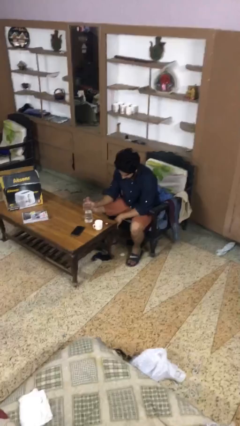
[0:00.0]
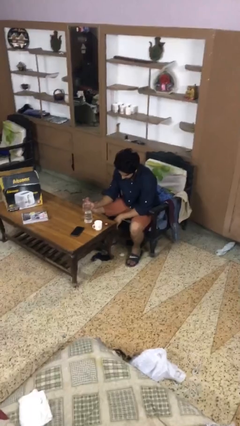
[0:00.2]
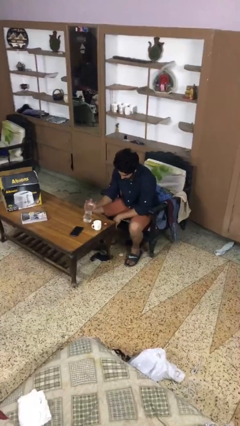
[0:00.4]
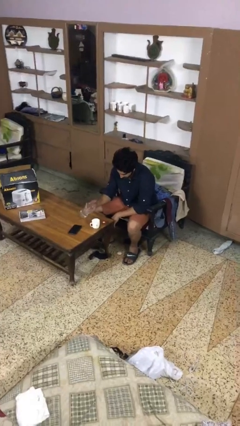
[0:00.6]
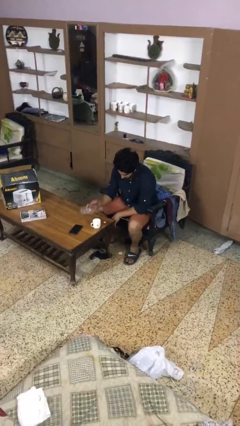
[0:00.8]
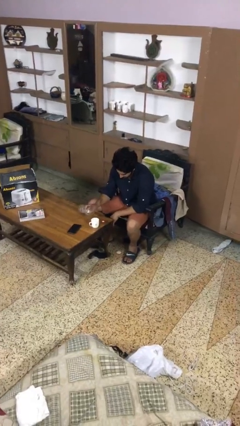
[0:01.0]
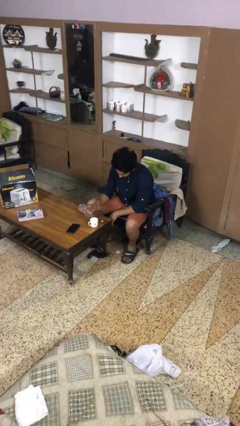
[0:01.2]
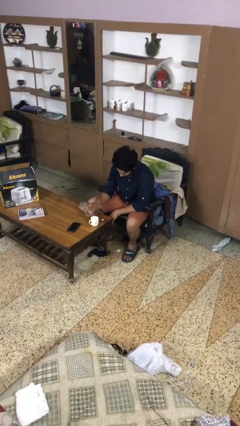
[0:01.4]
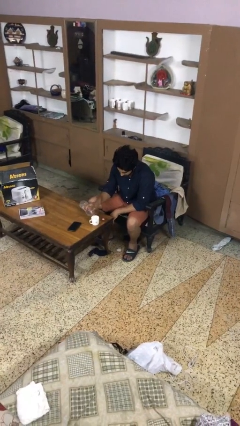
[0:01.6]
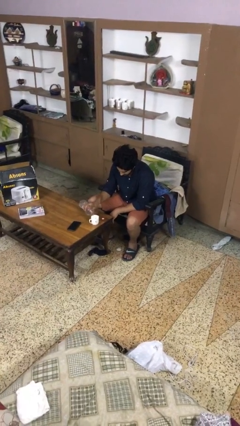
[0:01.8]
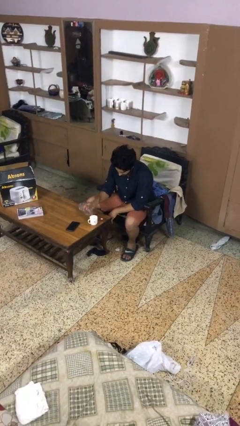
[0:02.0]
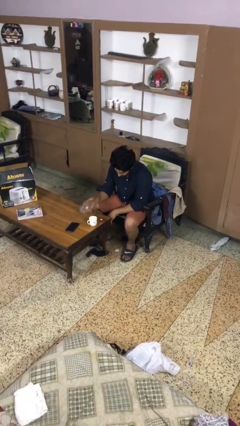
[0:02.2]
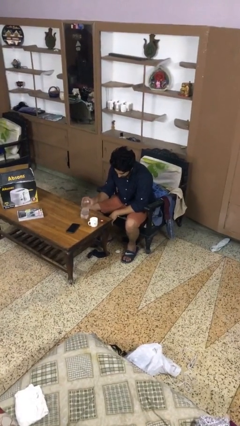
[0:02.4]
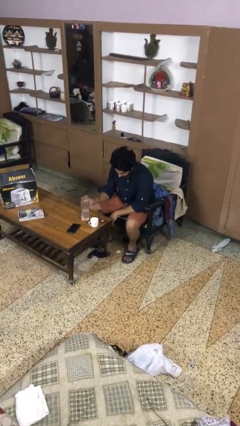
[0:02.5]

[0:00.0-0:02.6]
person pours liquid into cup

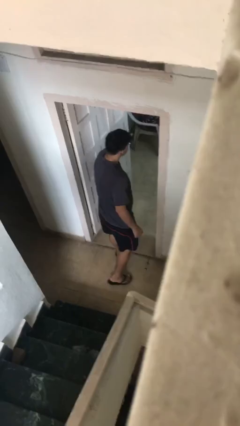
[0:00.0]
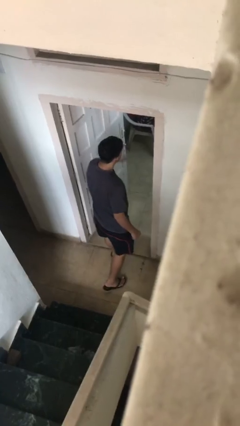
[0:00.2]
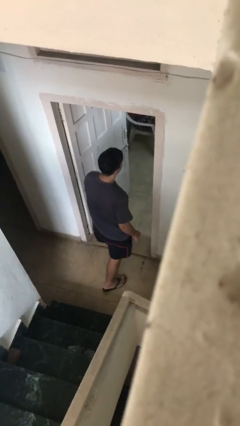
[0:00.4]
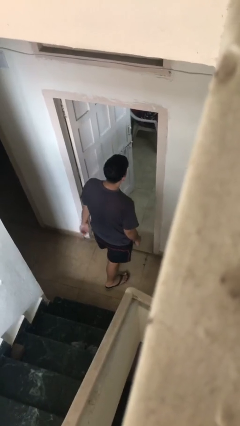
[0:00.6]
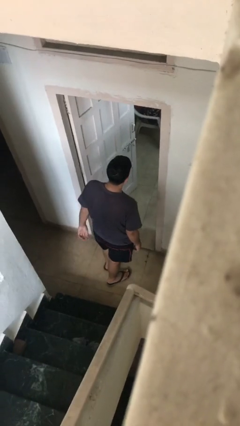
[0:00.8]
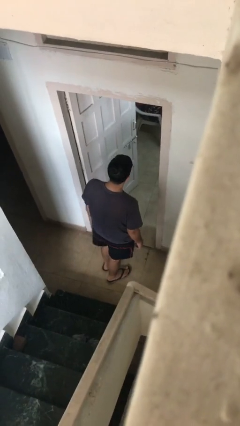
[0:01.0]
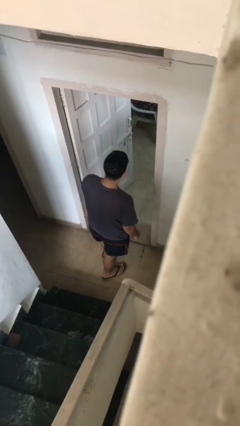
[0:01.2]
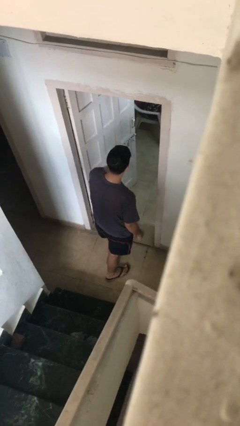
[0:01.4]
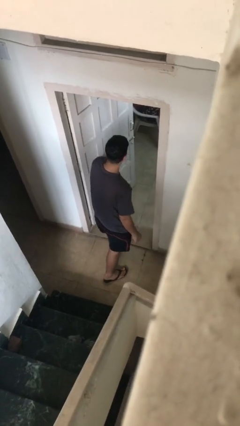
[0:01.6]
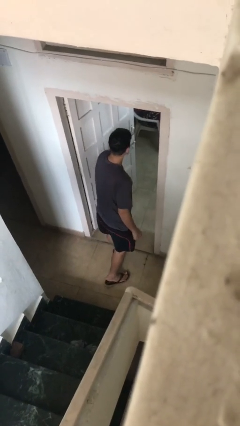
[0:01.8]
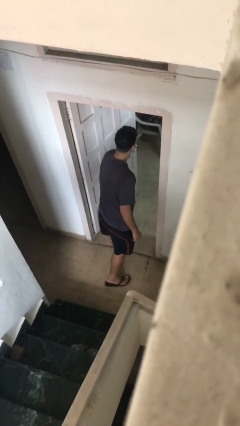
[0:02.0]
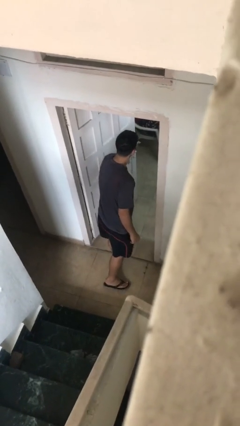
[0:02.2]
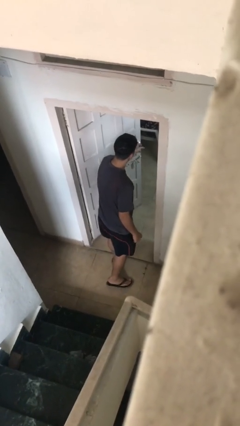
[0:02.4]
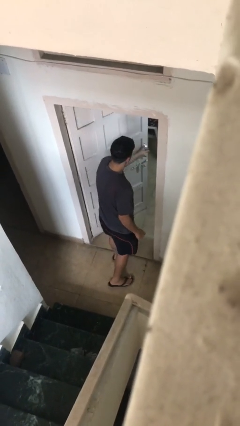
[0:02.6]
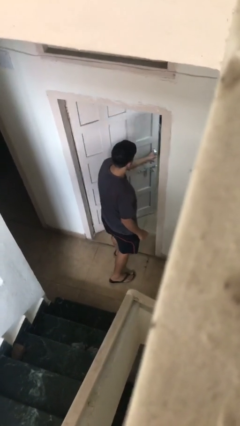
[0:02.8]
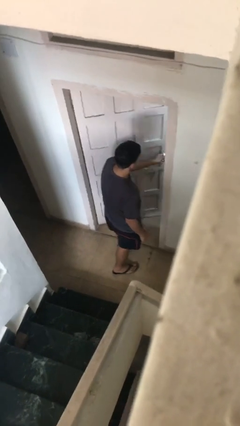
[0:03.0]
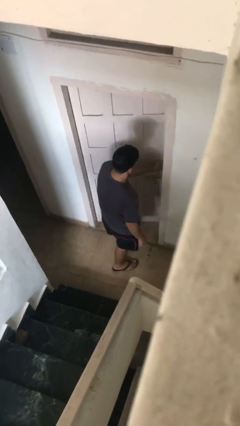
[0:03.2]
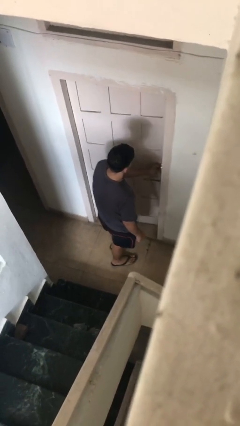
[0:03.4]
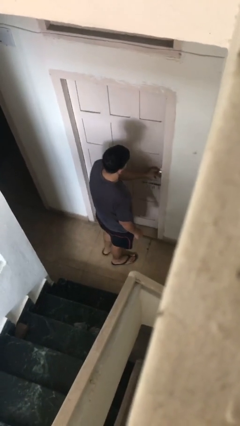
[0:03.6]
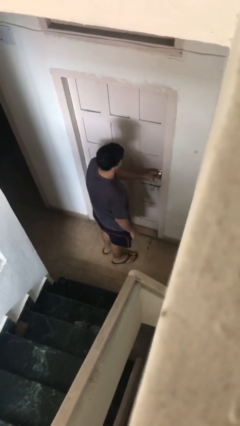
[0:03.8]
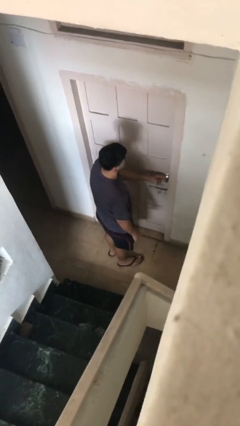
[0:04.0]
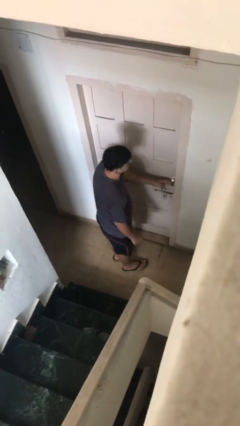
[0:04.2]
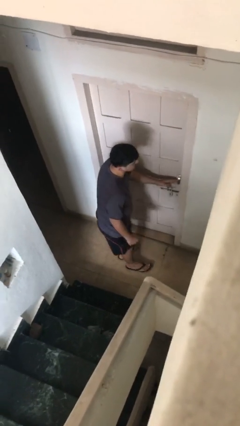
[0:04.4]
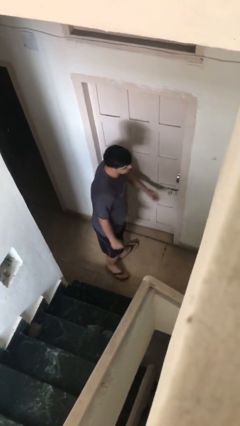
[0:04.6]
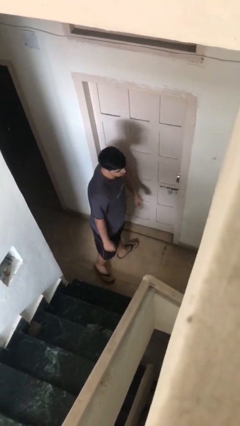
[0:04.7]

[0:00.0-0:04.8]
person closes facility door

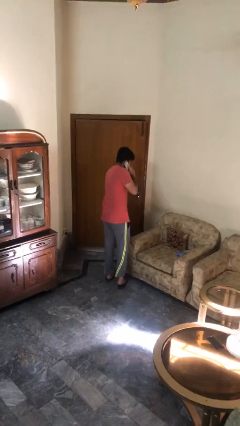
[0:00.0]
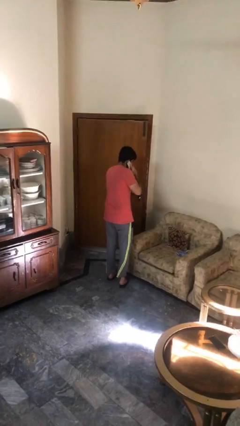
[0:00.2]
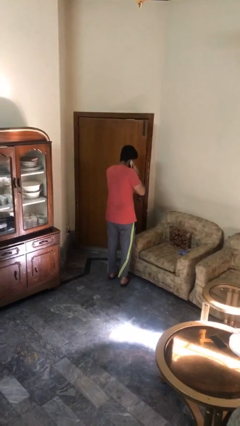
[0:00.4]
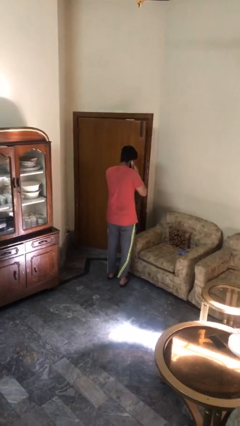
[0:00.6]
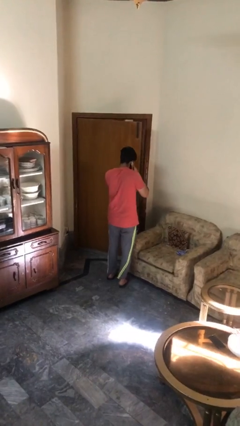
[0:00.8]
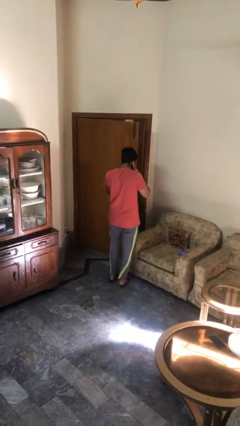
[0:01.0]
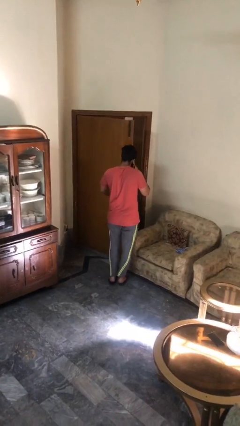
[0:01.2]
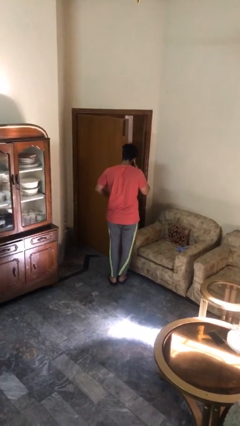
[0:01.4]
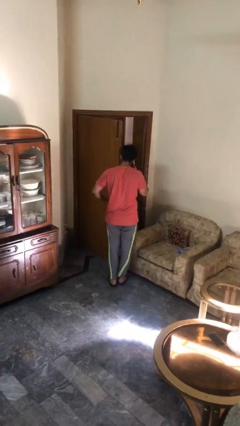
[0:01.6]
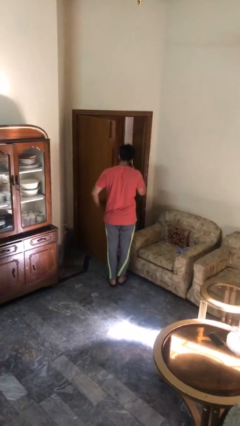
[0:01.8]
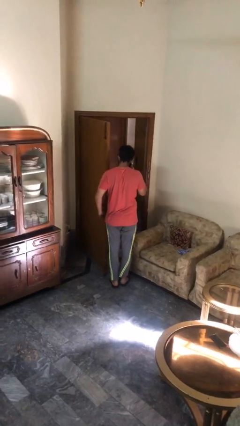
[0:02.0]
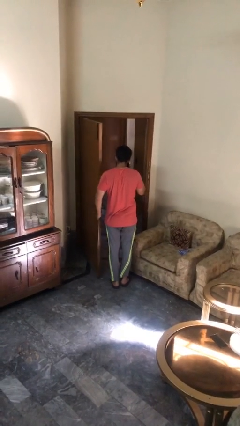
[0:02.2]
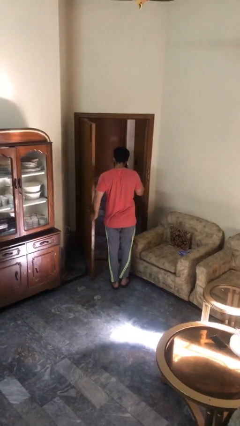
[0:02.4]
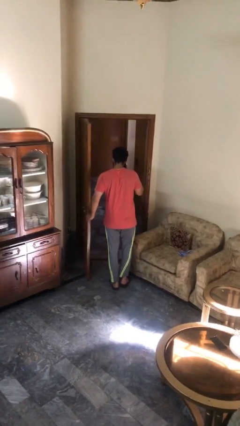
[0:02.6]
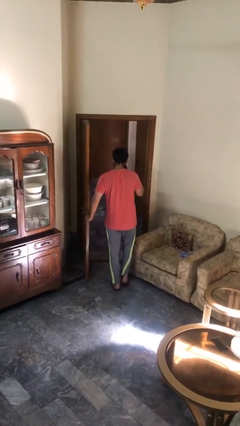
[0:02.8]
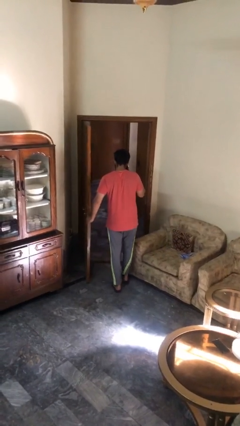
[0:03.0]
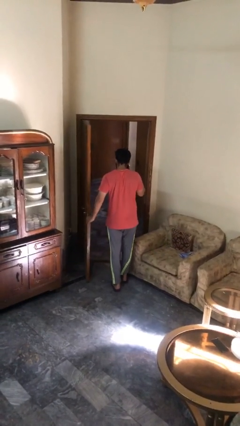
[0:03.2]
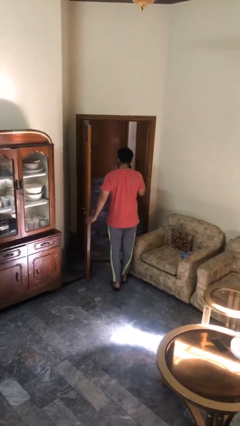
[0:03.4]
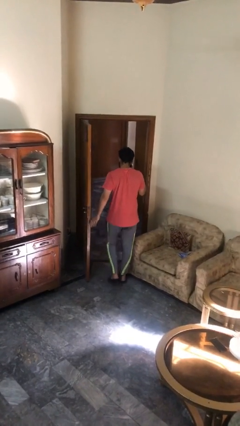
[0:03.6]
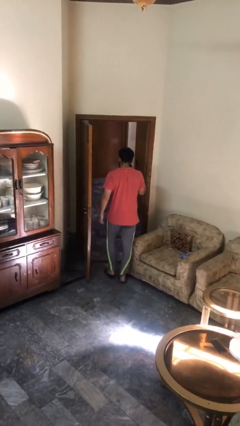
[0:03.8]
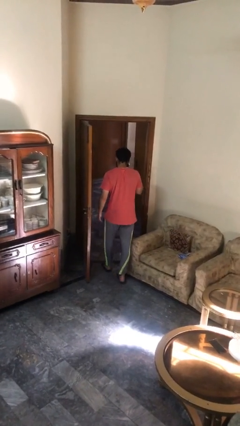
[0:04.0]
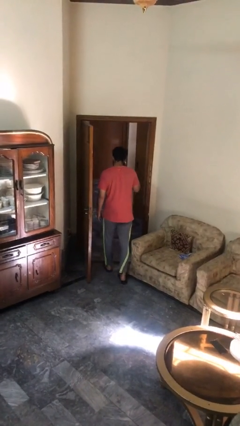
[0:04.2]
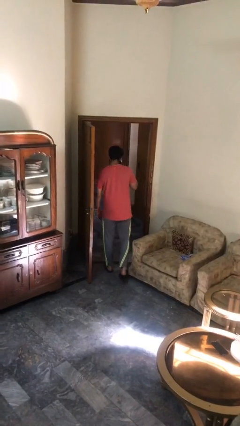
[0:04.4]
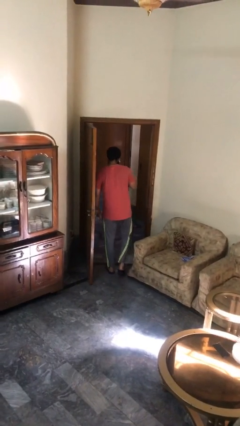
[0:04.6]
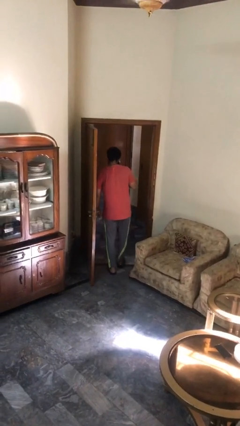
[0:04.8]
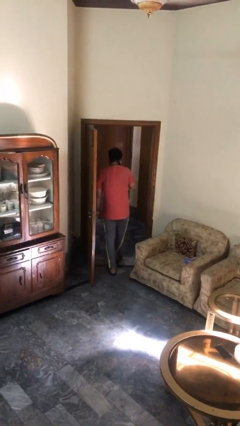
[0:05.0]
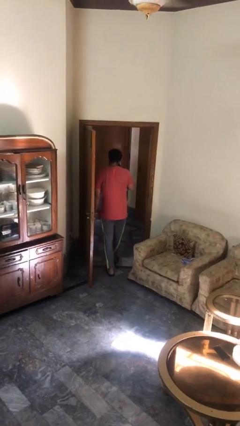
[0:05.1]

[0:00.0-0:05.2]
person opens facility door

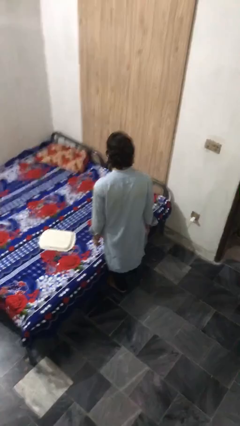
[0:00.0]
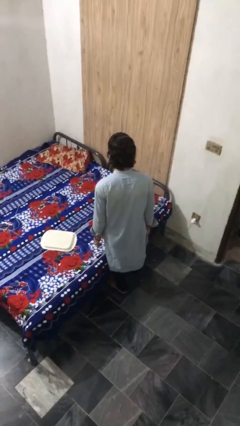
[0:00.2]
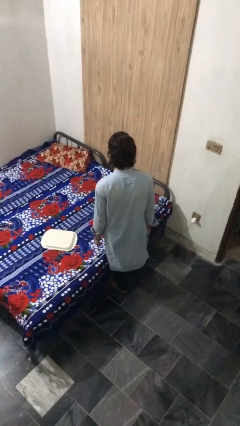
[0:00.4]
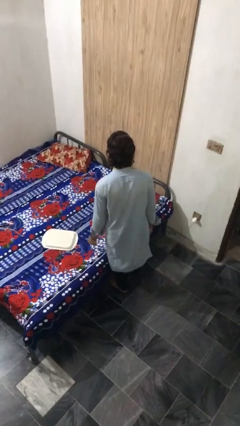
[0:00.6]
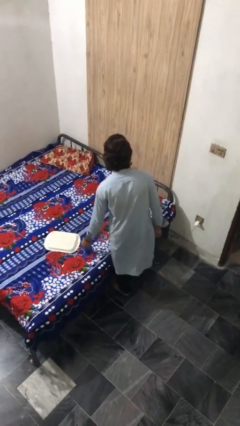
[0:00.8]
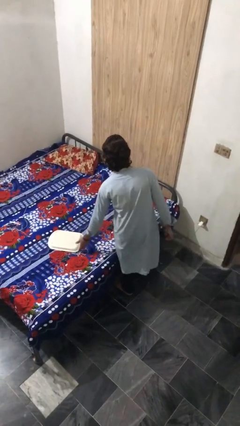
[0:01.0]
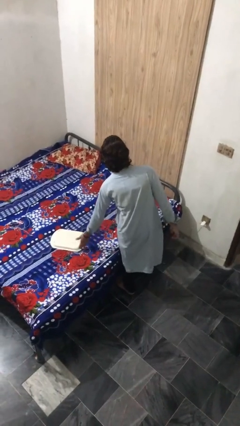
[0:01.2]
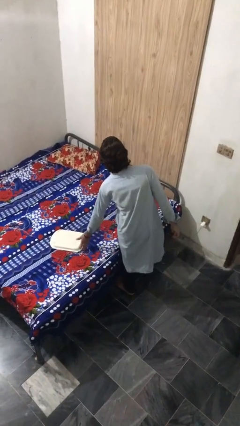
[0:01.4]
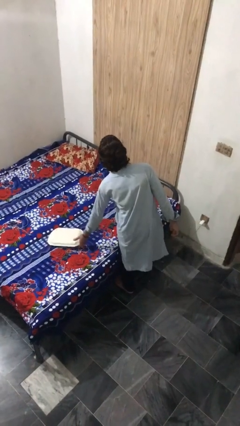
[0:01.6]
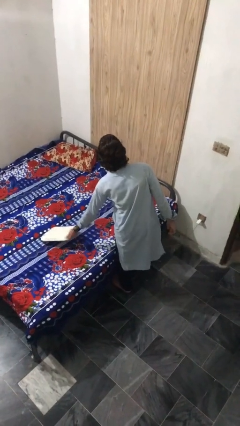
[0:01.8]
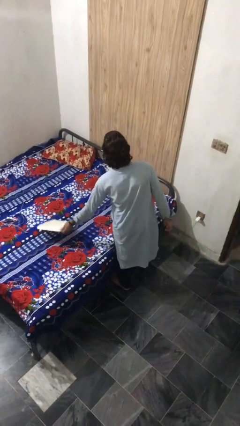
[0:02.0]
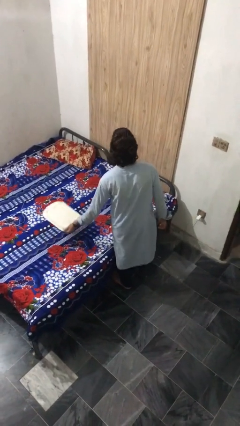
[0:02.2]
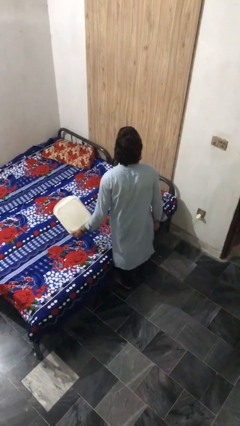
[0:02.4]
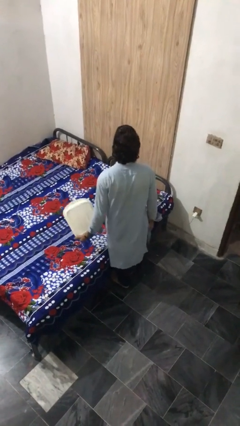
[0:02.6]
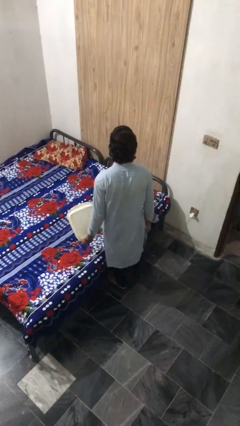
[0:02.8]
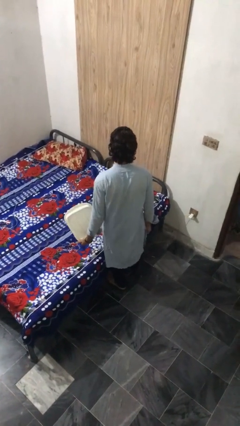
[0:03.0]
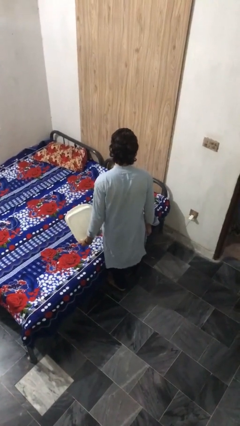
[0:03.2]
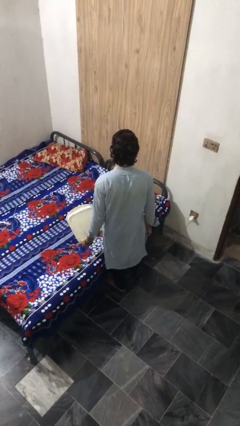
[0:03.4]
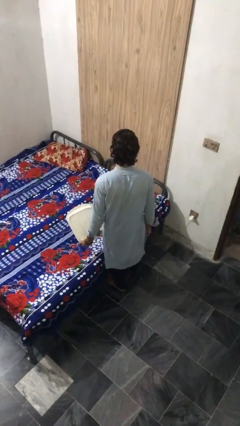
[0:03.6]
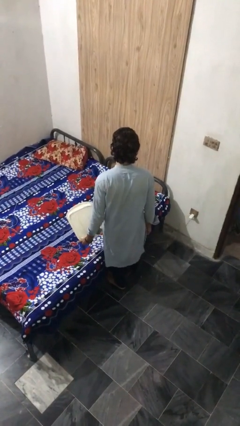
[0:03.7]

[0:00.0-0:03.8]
person picks up object from bed

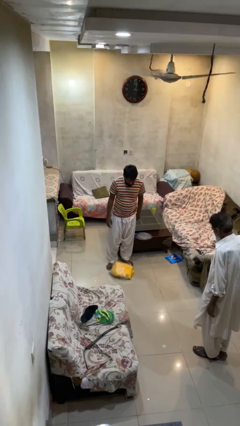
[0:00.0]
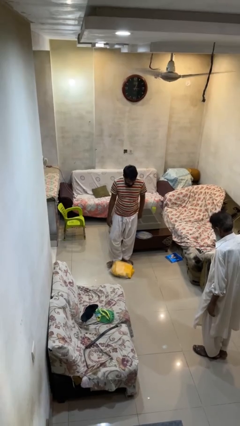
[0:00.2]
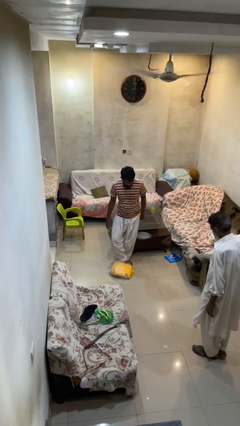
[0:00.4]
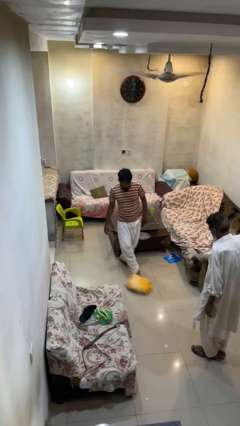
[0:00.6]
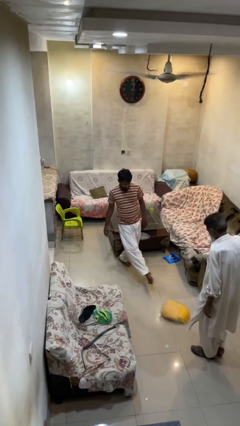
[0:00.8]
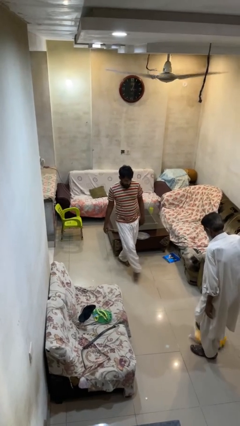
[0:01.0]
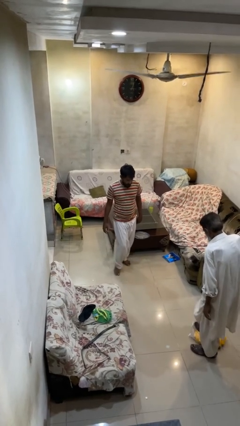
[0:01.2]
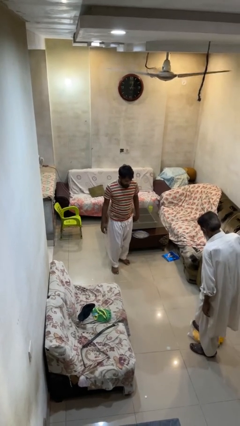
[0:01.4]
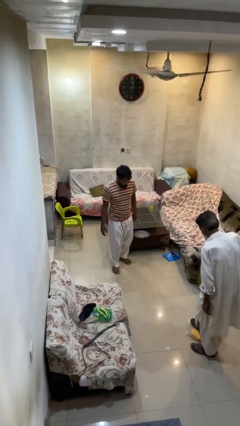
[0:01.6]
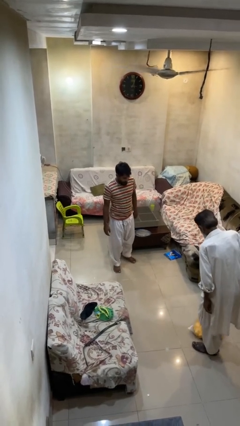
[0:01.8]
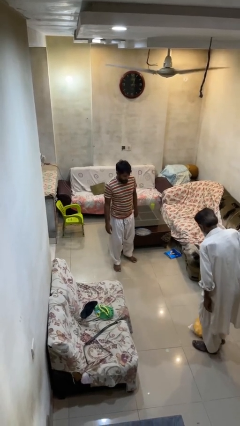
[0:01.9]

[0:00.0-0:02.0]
person kicks object to person
